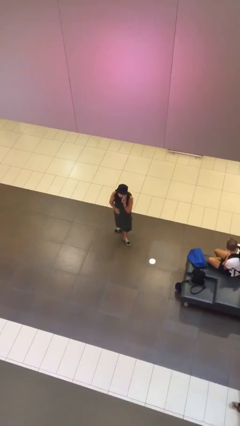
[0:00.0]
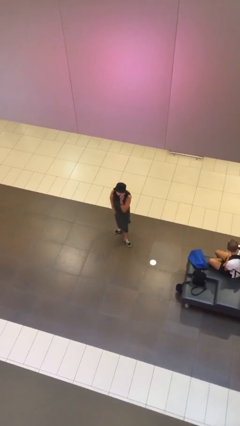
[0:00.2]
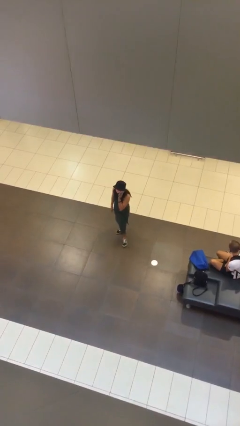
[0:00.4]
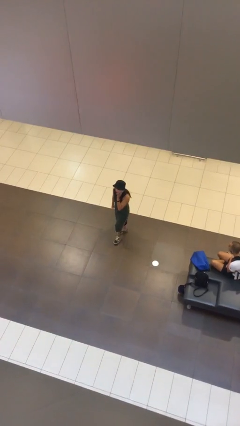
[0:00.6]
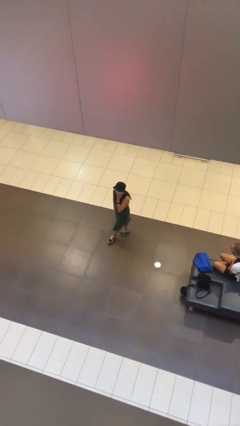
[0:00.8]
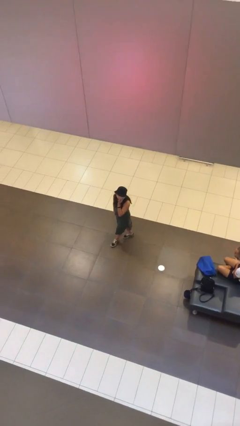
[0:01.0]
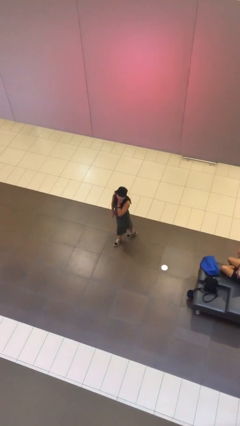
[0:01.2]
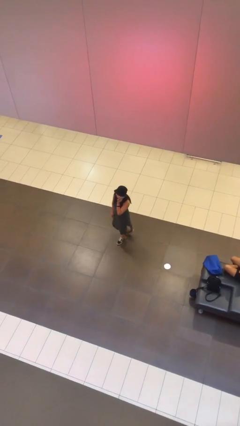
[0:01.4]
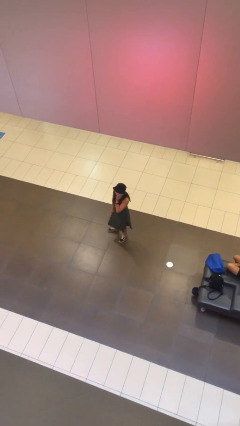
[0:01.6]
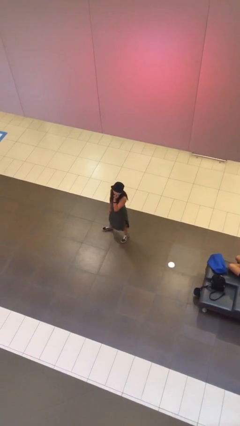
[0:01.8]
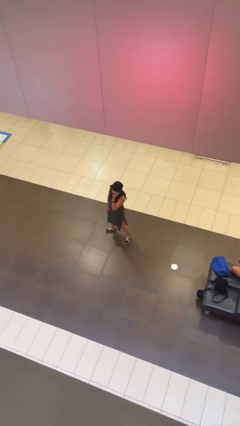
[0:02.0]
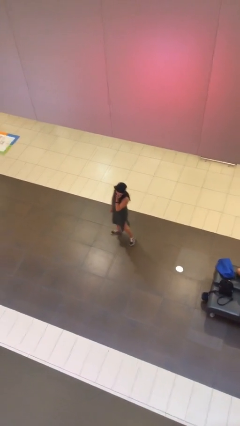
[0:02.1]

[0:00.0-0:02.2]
person talks on phone

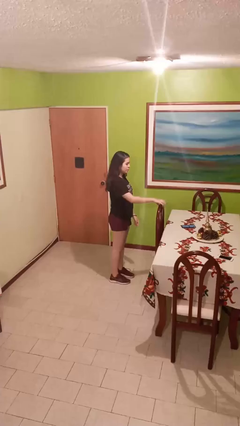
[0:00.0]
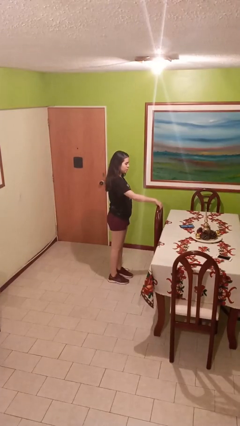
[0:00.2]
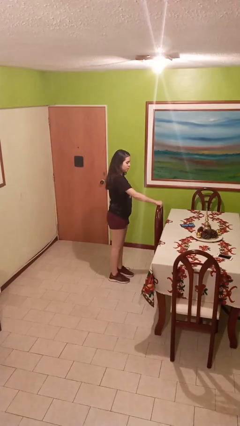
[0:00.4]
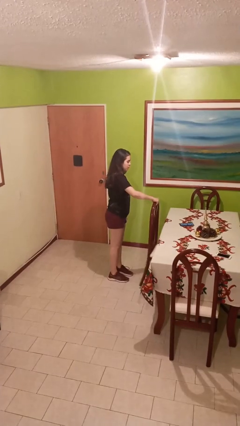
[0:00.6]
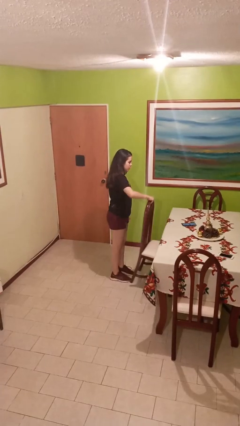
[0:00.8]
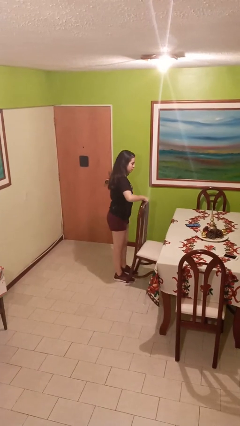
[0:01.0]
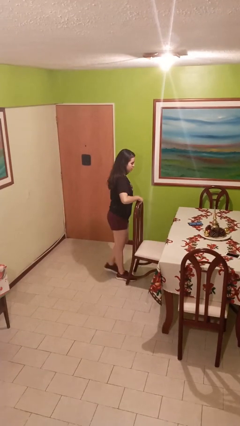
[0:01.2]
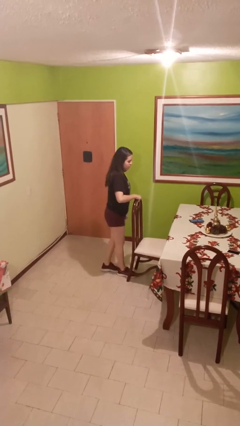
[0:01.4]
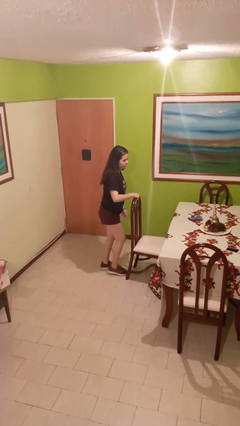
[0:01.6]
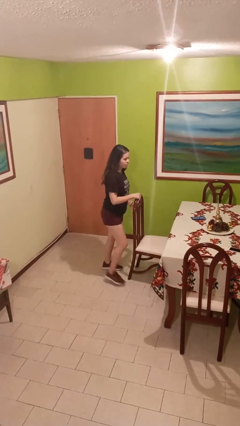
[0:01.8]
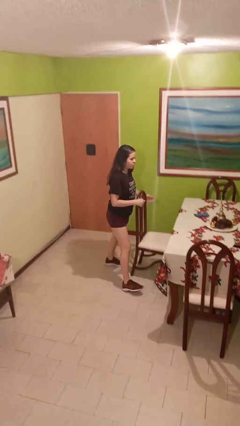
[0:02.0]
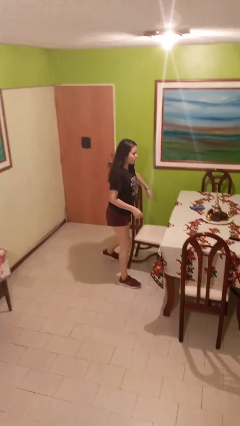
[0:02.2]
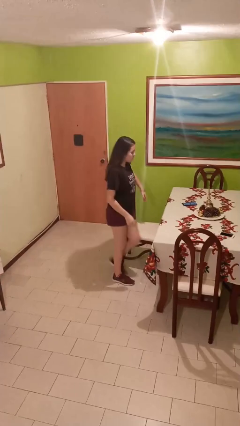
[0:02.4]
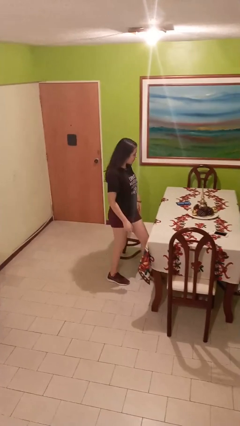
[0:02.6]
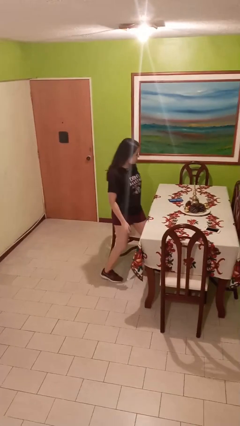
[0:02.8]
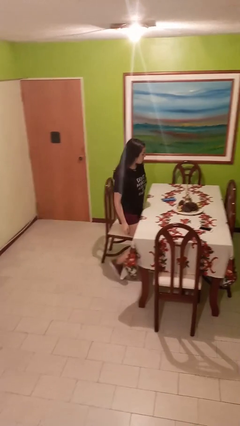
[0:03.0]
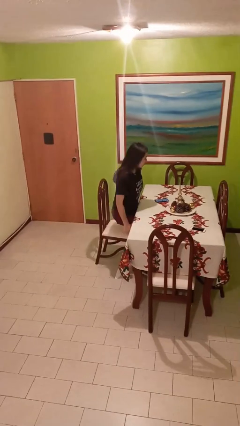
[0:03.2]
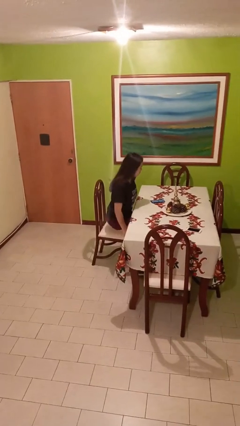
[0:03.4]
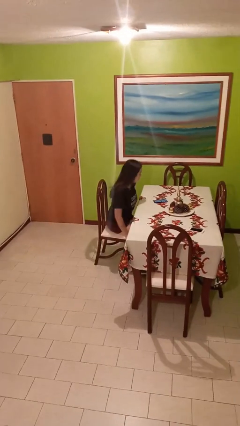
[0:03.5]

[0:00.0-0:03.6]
person stands up

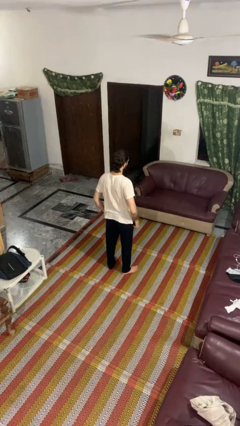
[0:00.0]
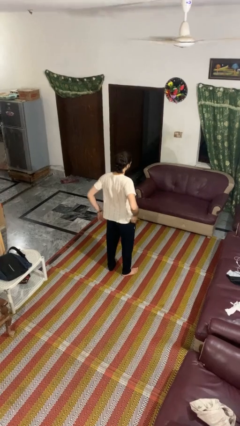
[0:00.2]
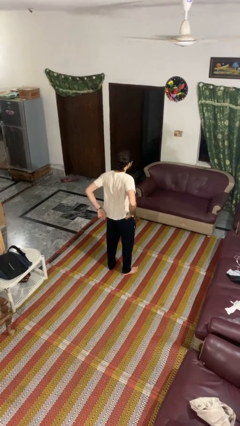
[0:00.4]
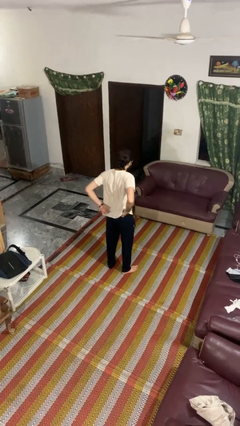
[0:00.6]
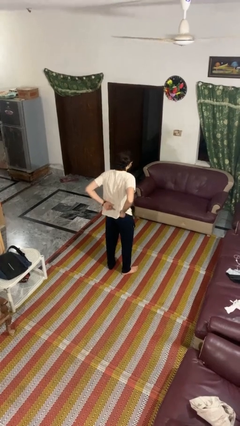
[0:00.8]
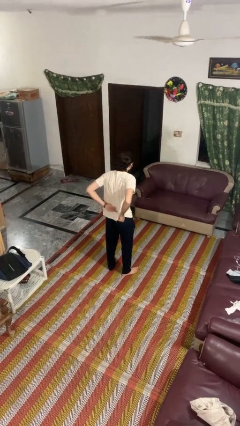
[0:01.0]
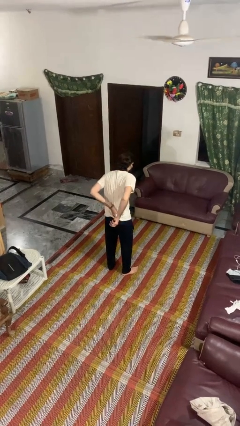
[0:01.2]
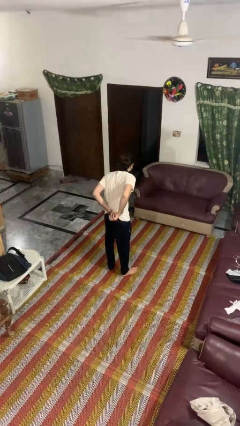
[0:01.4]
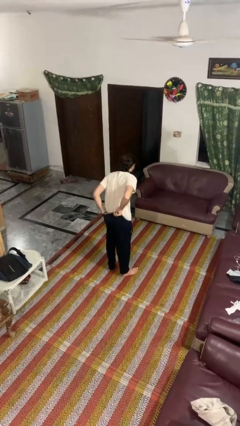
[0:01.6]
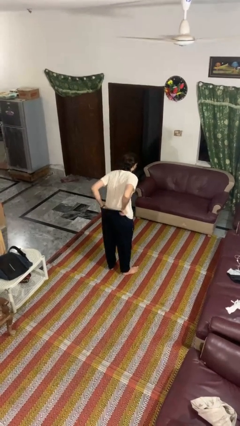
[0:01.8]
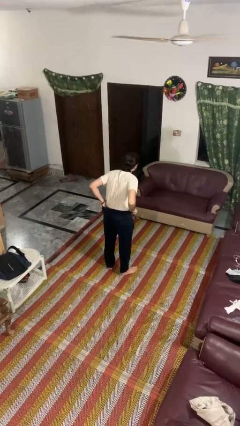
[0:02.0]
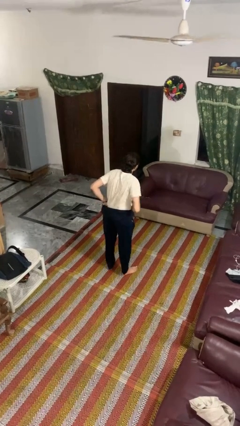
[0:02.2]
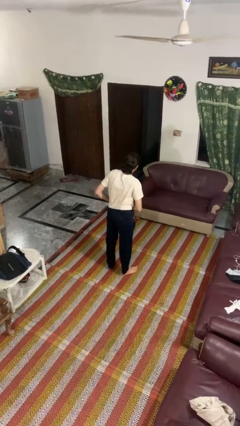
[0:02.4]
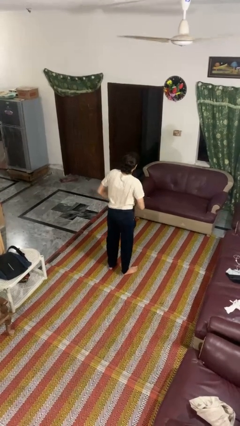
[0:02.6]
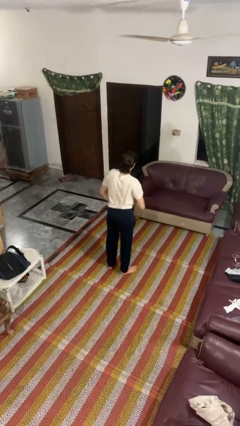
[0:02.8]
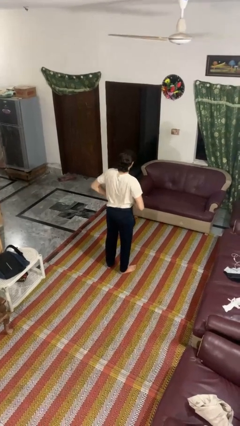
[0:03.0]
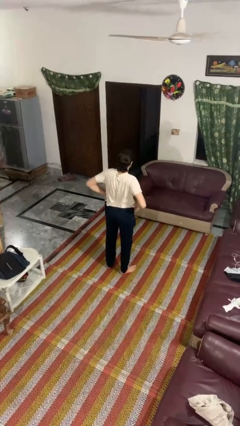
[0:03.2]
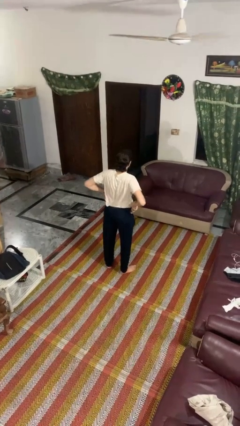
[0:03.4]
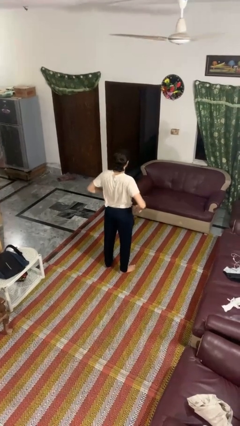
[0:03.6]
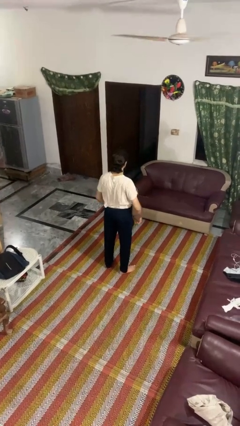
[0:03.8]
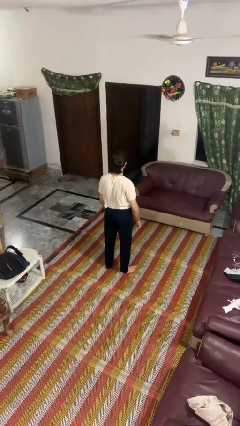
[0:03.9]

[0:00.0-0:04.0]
person tucks in shirt

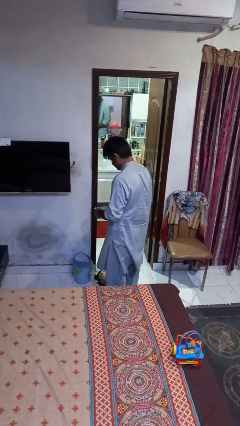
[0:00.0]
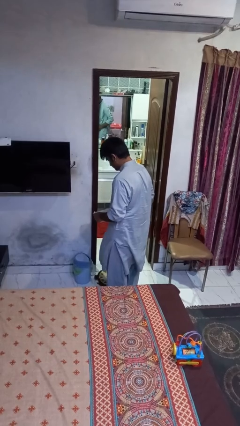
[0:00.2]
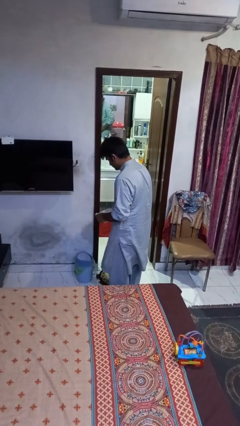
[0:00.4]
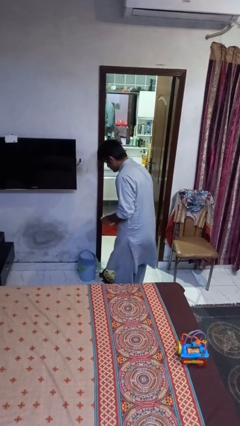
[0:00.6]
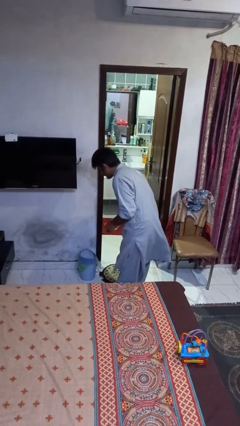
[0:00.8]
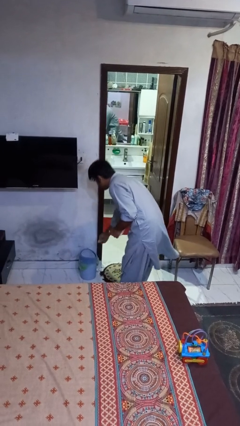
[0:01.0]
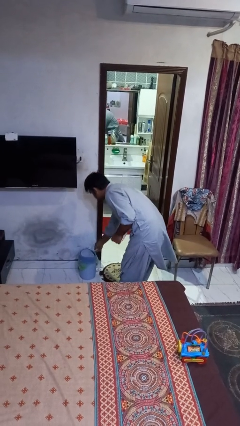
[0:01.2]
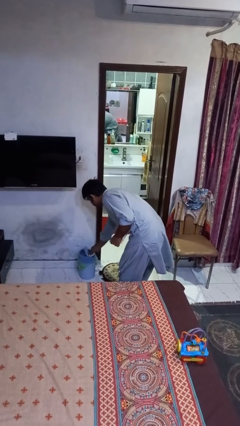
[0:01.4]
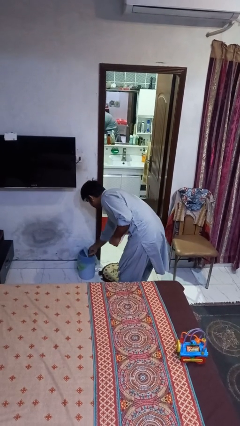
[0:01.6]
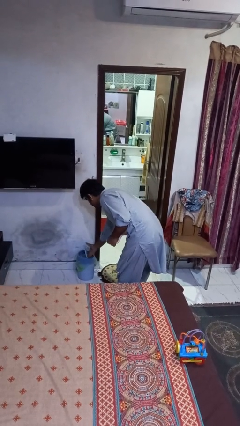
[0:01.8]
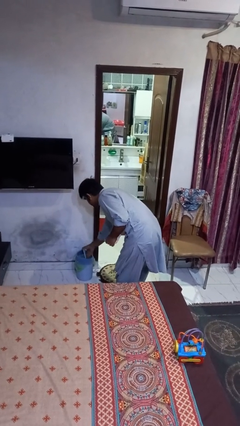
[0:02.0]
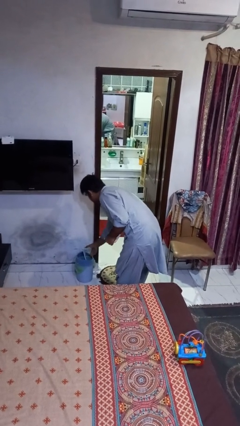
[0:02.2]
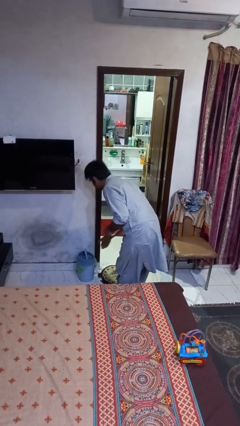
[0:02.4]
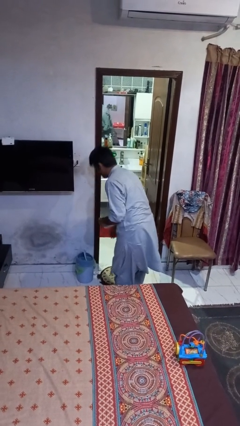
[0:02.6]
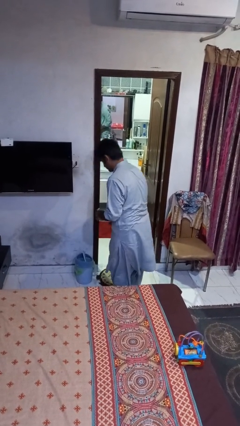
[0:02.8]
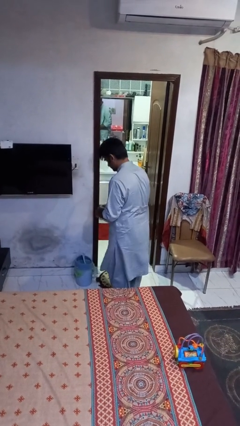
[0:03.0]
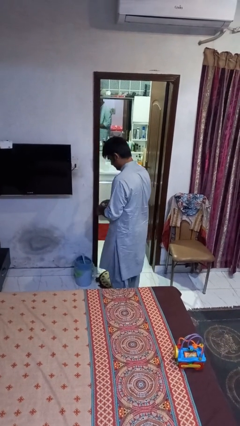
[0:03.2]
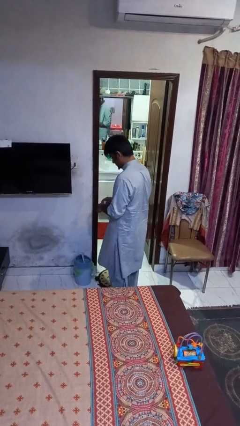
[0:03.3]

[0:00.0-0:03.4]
person discards trash

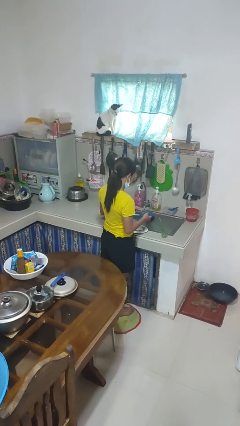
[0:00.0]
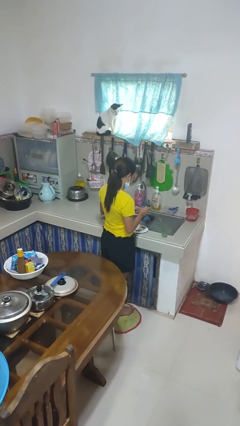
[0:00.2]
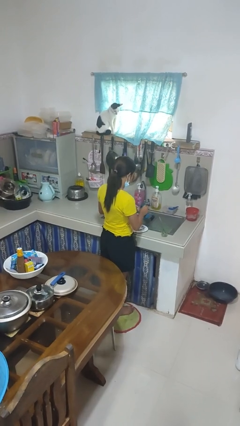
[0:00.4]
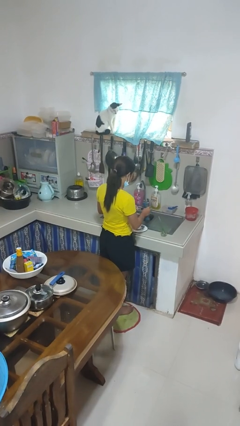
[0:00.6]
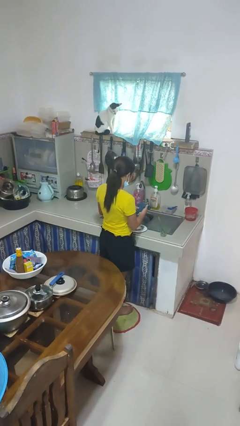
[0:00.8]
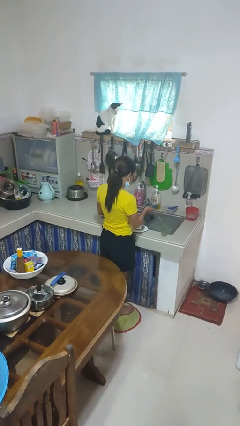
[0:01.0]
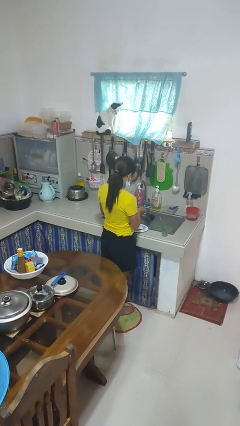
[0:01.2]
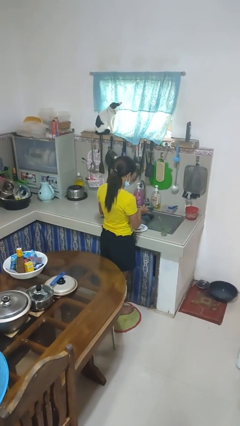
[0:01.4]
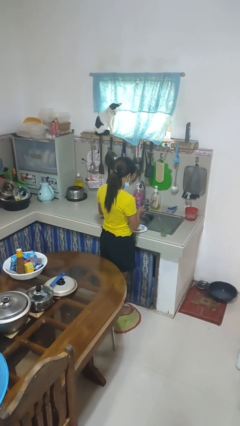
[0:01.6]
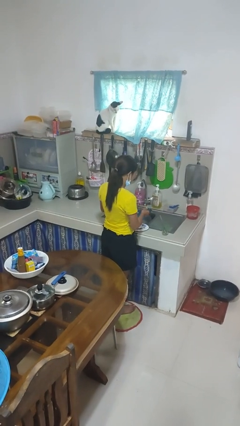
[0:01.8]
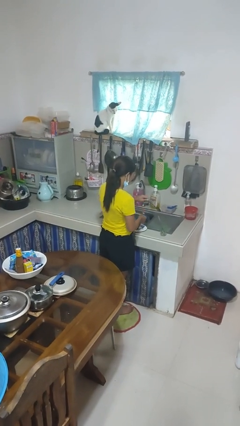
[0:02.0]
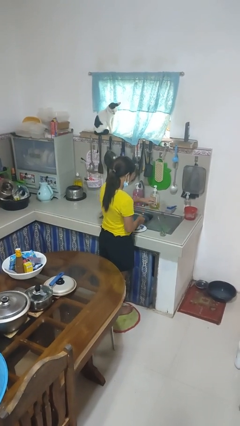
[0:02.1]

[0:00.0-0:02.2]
person dries dish

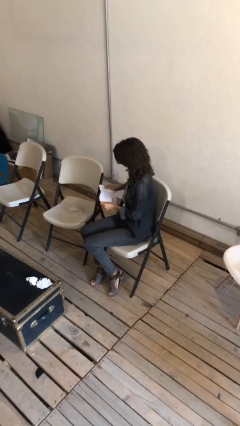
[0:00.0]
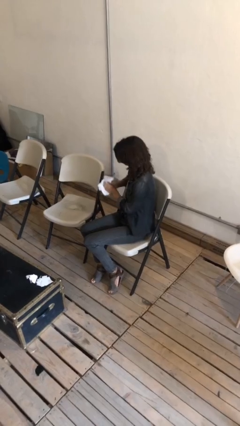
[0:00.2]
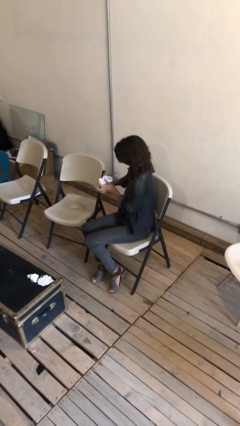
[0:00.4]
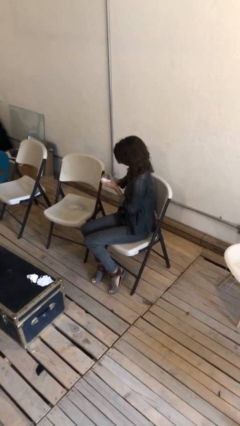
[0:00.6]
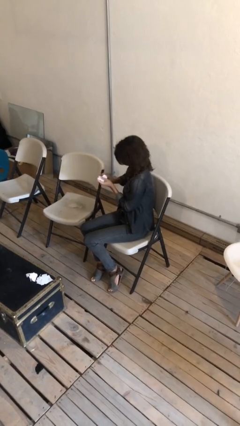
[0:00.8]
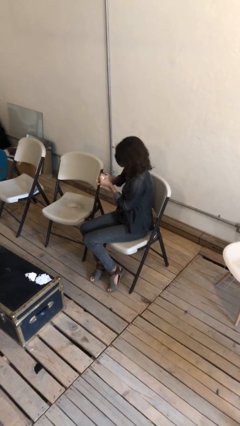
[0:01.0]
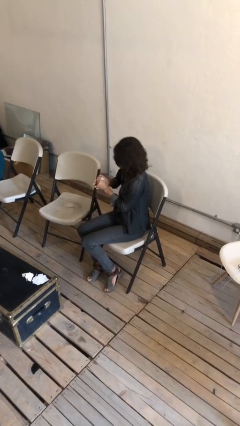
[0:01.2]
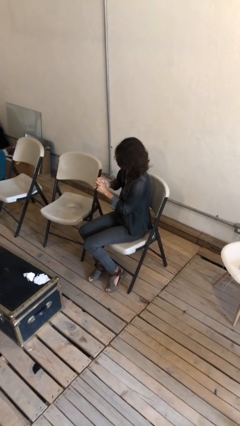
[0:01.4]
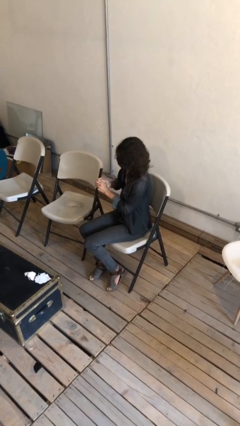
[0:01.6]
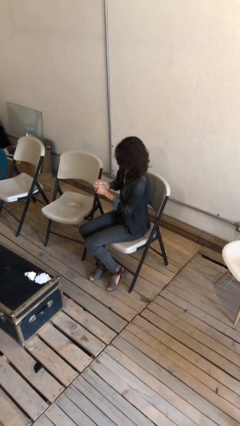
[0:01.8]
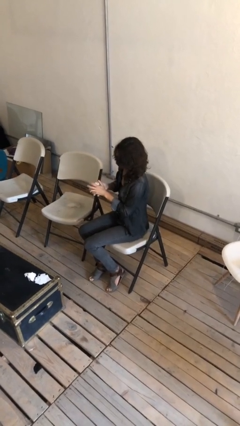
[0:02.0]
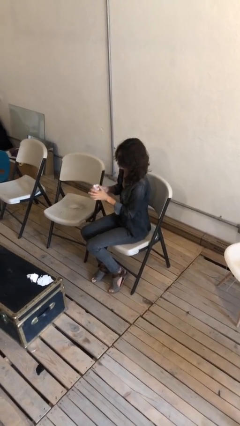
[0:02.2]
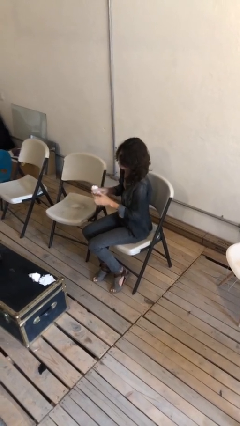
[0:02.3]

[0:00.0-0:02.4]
person crumples paper
